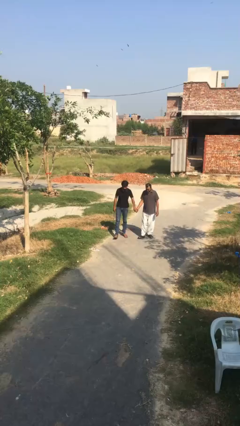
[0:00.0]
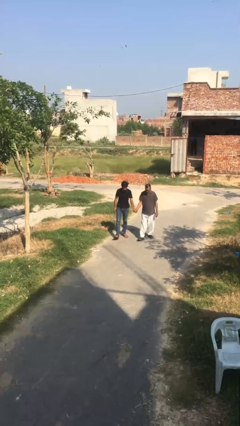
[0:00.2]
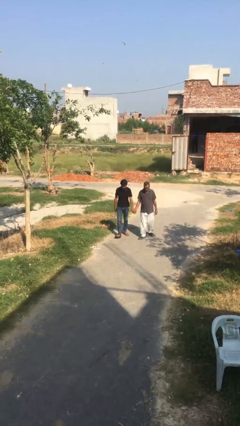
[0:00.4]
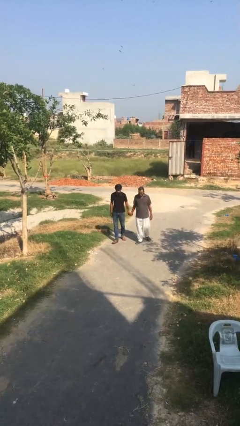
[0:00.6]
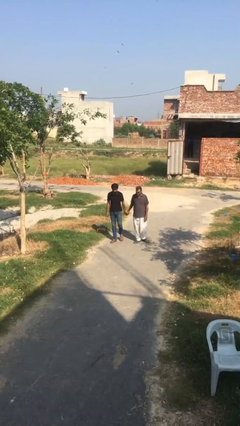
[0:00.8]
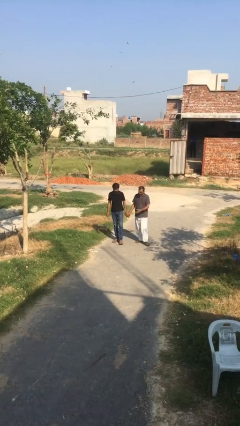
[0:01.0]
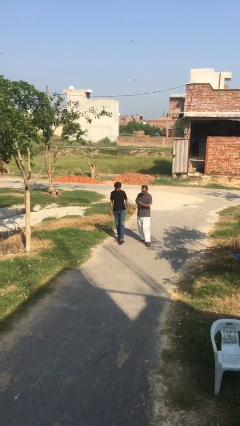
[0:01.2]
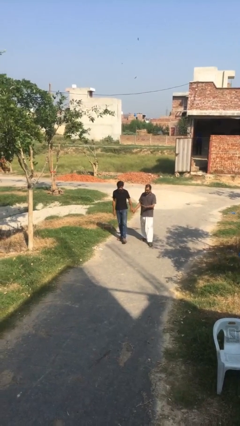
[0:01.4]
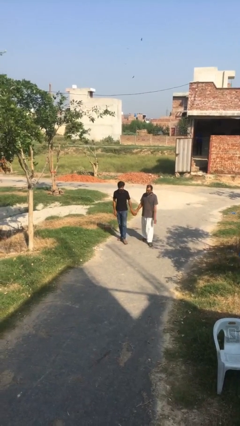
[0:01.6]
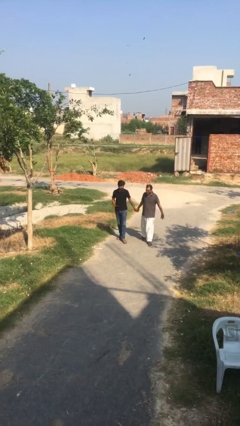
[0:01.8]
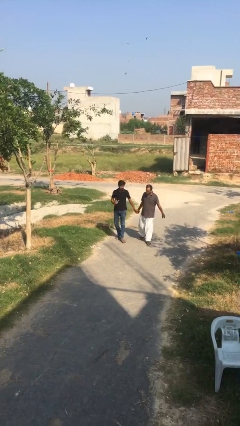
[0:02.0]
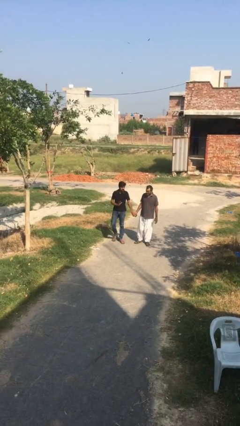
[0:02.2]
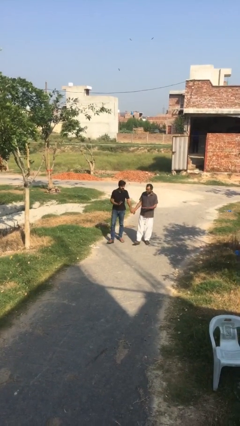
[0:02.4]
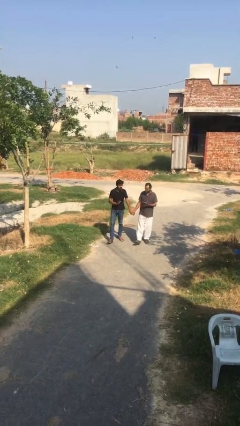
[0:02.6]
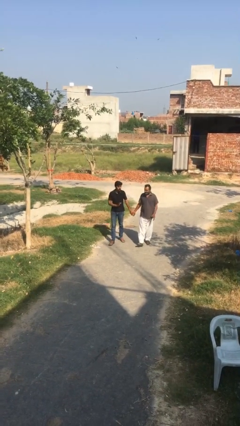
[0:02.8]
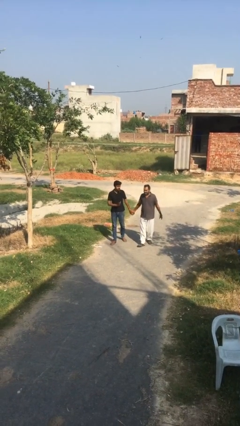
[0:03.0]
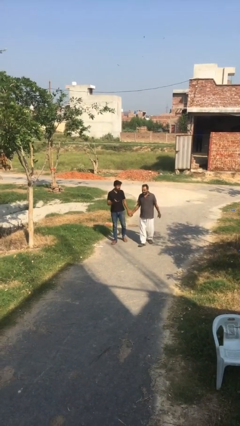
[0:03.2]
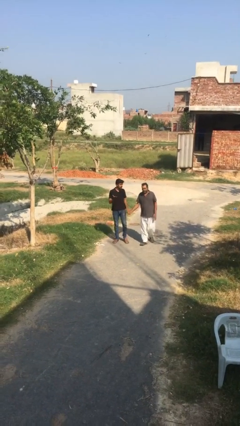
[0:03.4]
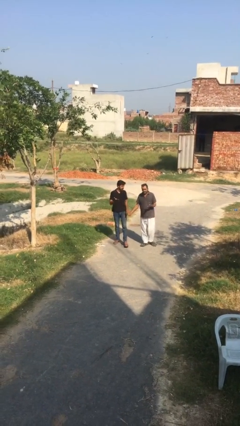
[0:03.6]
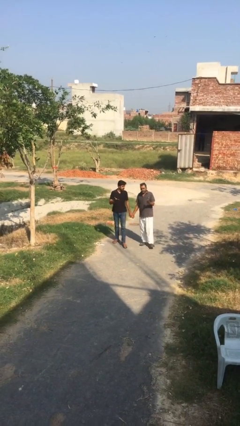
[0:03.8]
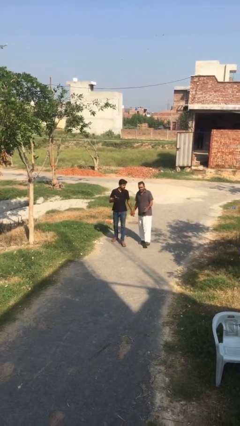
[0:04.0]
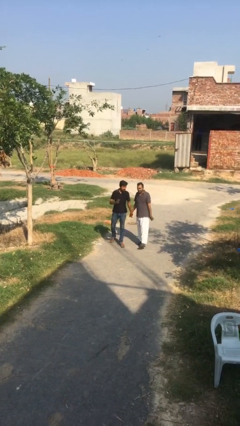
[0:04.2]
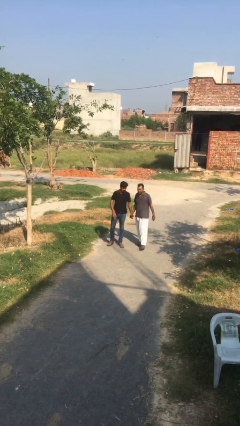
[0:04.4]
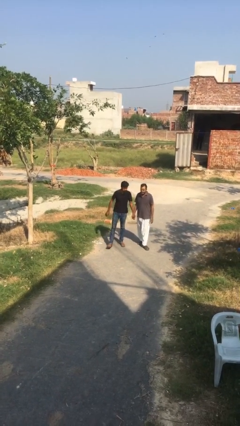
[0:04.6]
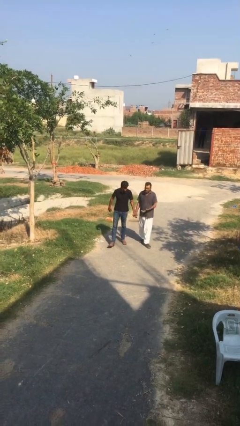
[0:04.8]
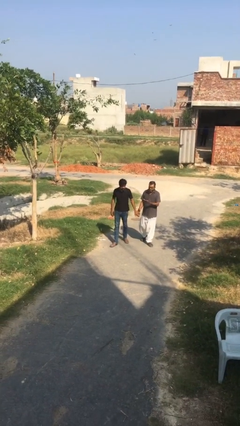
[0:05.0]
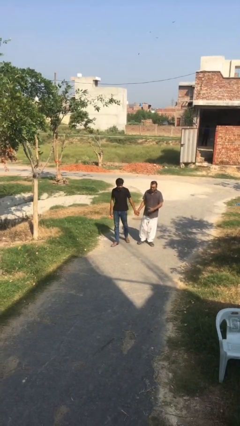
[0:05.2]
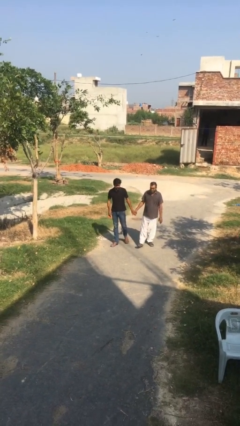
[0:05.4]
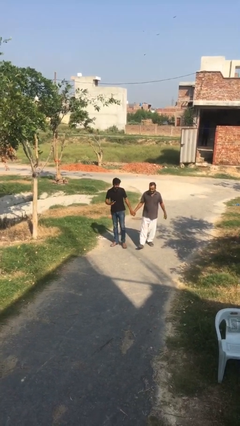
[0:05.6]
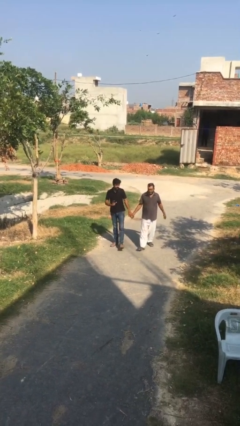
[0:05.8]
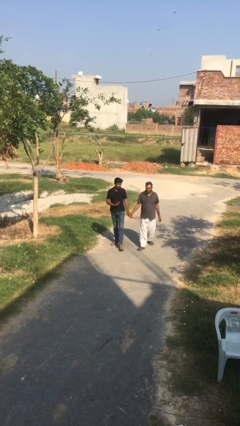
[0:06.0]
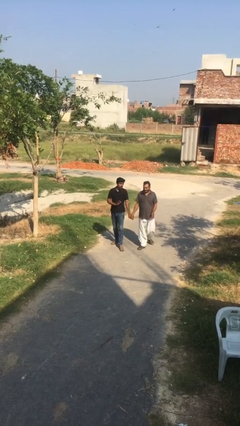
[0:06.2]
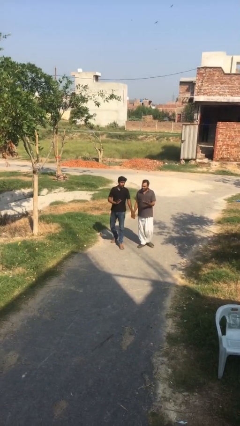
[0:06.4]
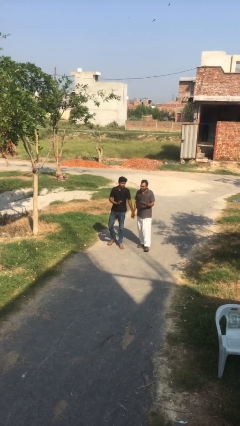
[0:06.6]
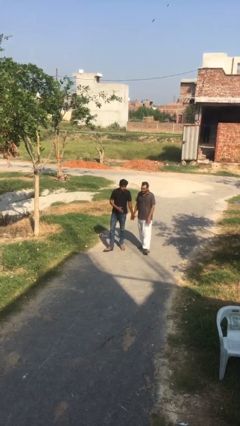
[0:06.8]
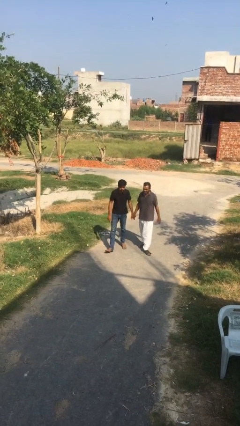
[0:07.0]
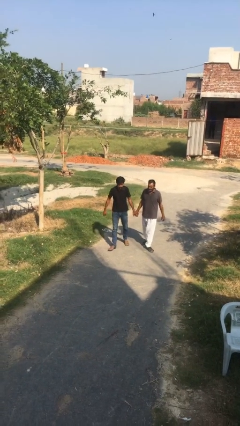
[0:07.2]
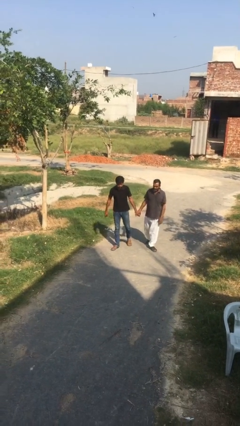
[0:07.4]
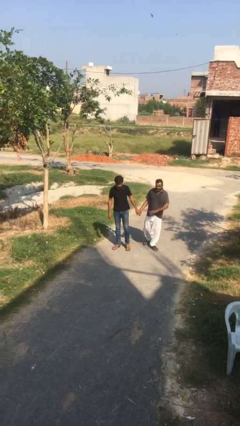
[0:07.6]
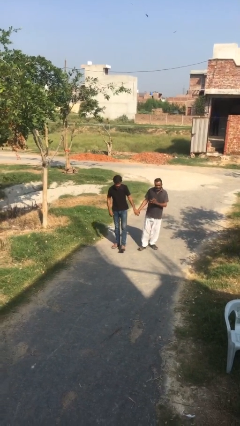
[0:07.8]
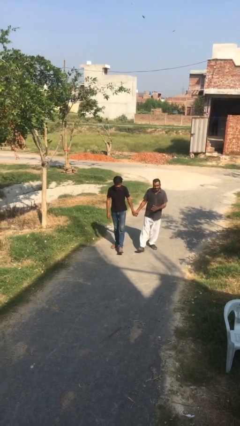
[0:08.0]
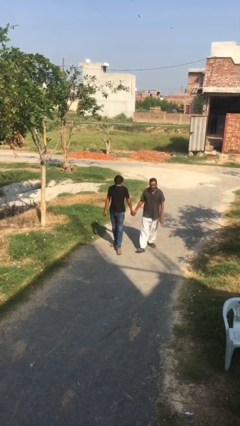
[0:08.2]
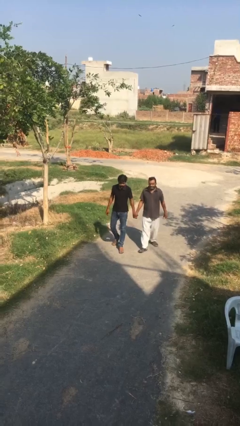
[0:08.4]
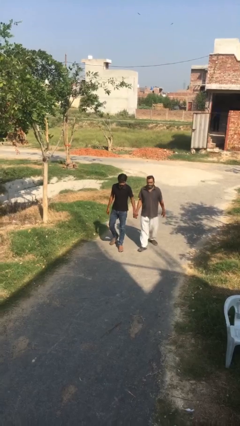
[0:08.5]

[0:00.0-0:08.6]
person holds hand

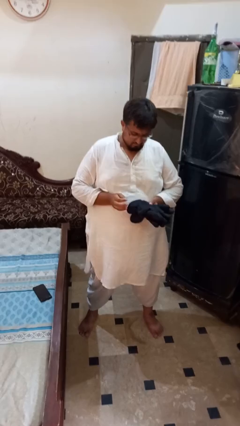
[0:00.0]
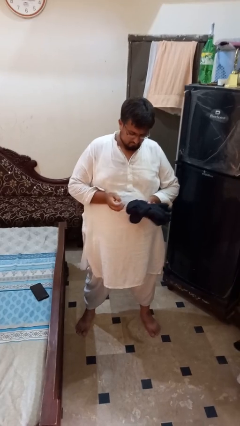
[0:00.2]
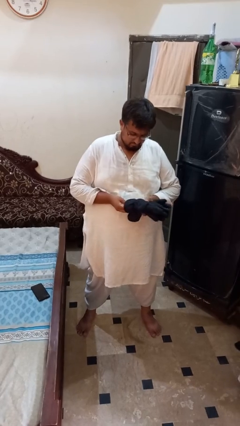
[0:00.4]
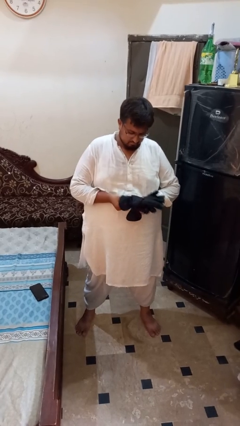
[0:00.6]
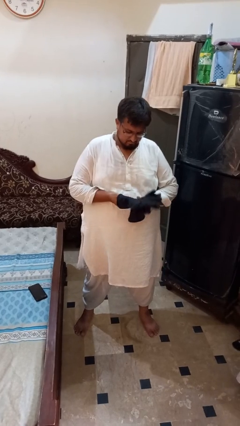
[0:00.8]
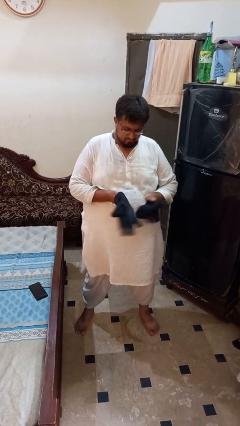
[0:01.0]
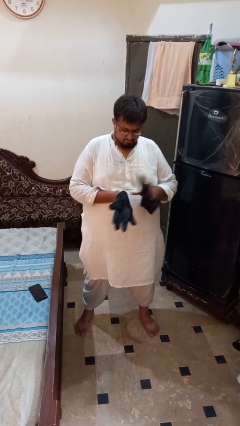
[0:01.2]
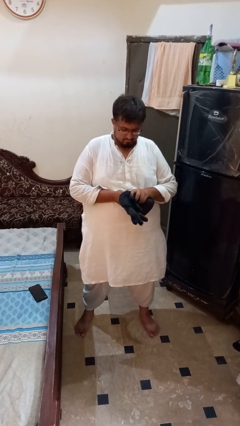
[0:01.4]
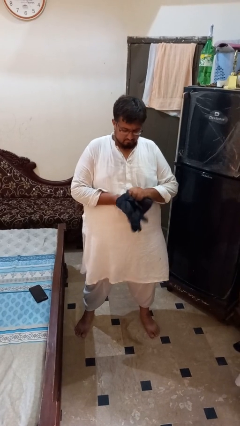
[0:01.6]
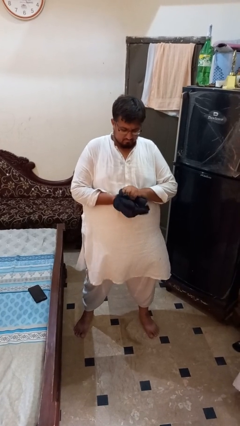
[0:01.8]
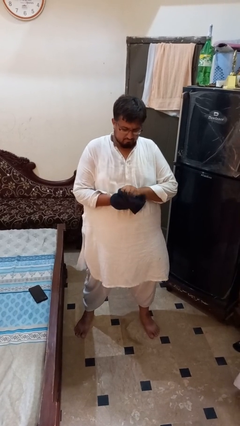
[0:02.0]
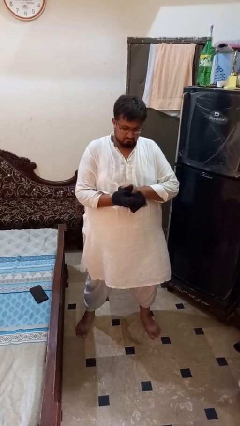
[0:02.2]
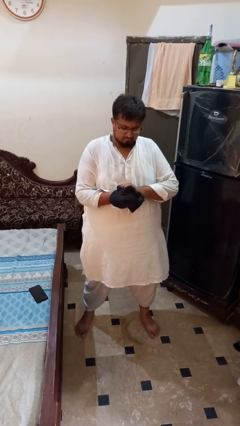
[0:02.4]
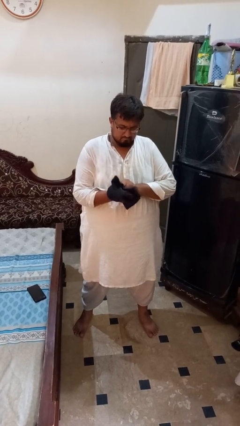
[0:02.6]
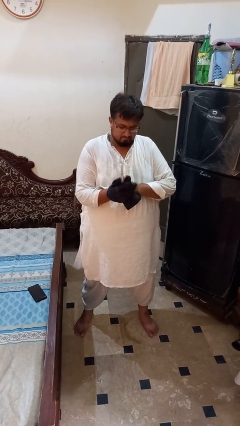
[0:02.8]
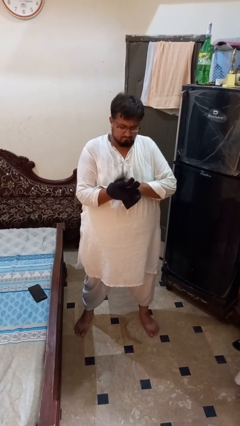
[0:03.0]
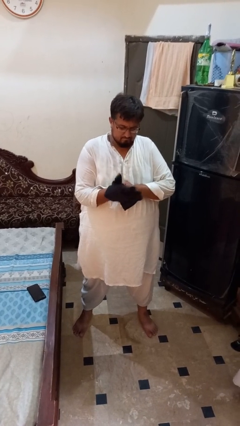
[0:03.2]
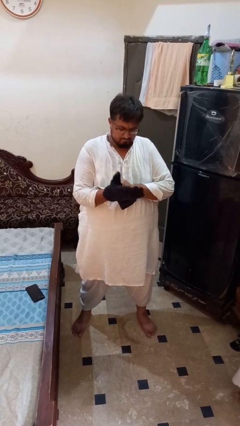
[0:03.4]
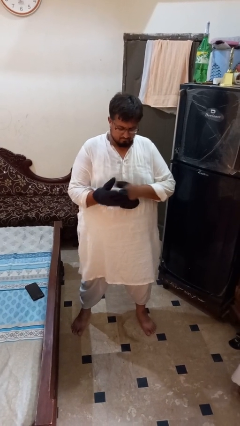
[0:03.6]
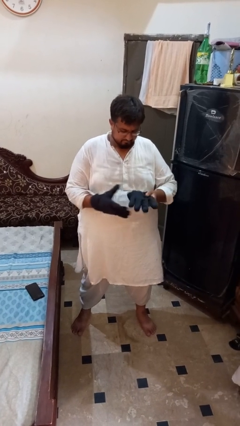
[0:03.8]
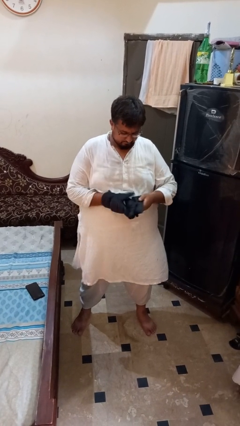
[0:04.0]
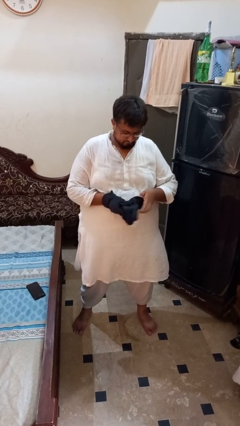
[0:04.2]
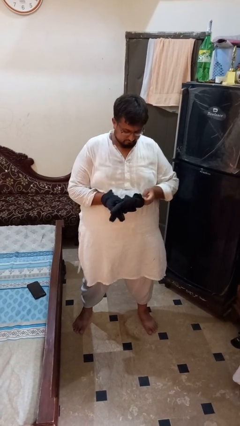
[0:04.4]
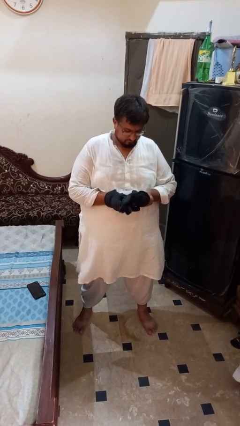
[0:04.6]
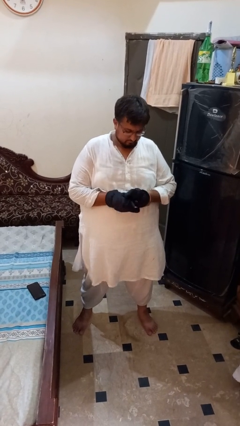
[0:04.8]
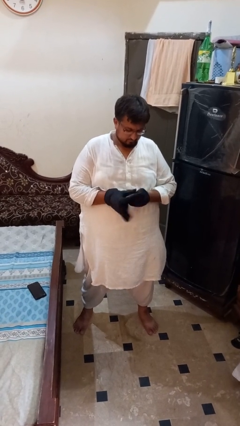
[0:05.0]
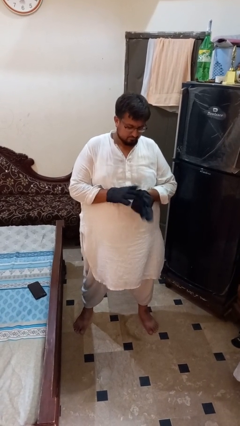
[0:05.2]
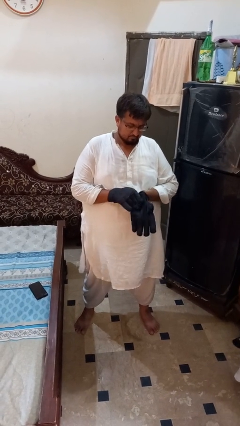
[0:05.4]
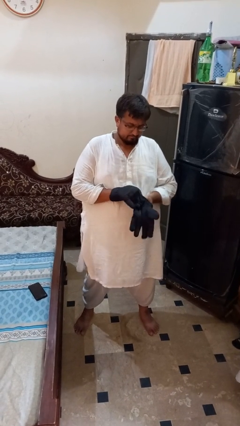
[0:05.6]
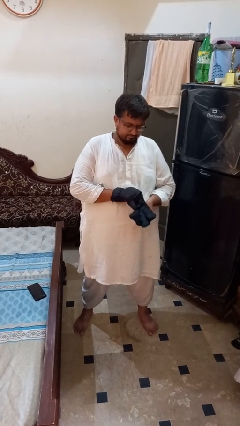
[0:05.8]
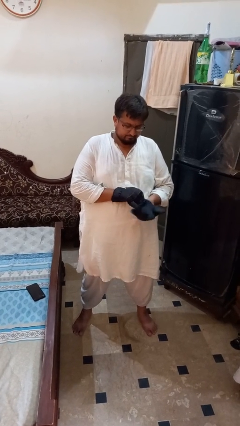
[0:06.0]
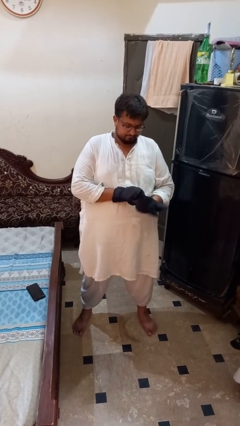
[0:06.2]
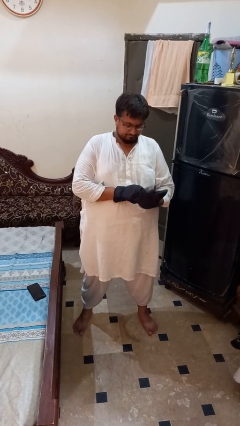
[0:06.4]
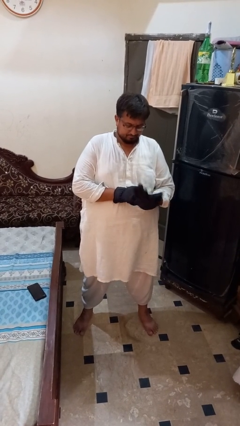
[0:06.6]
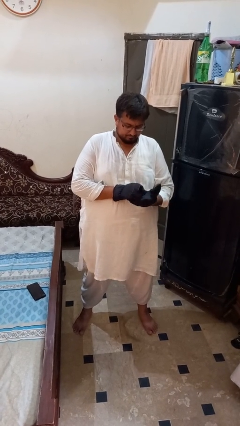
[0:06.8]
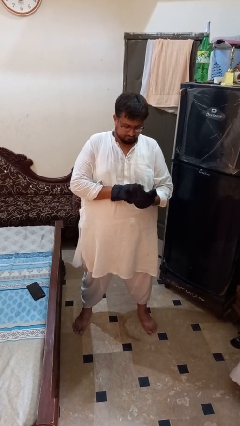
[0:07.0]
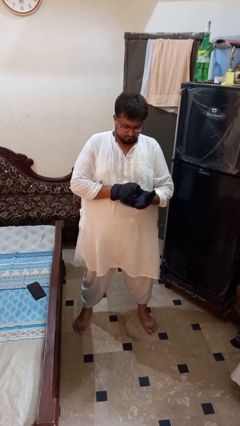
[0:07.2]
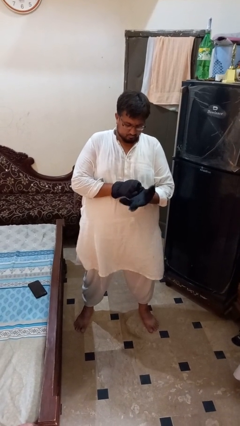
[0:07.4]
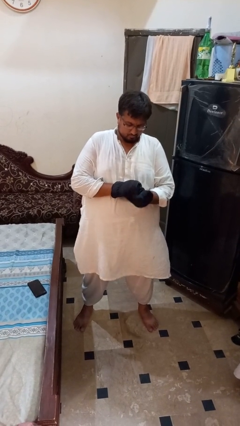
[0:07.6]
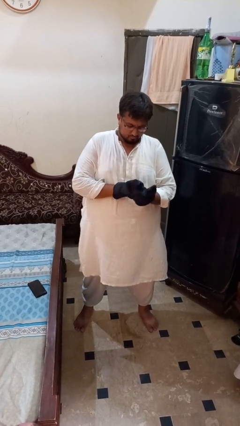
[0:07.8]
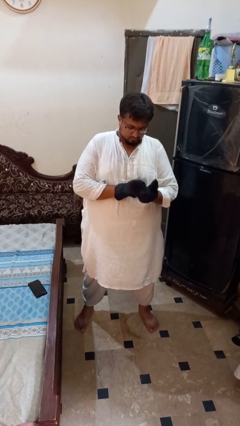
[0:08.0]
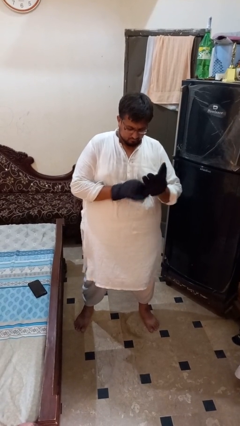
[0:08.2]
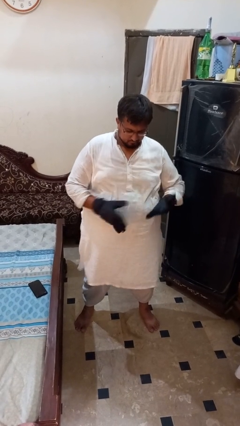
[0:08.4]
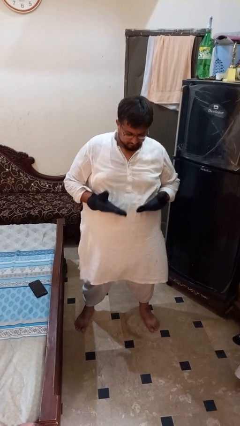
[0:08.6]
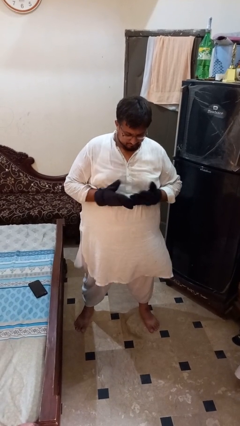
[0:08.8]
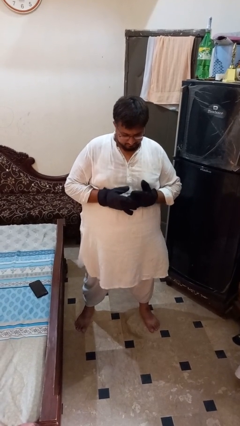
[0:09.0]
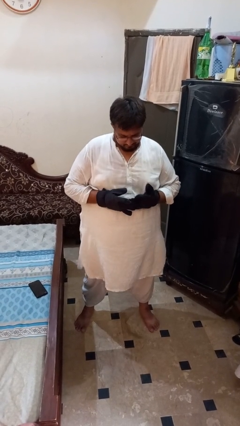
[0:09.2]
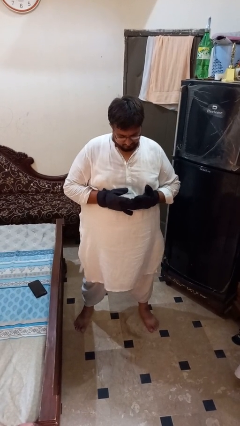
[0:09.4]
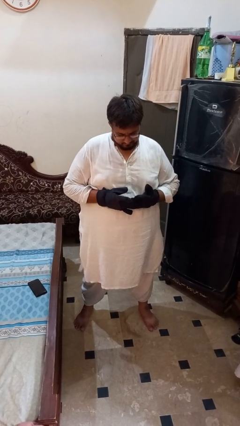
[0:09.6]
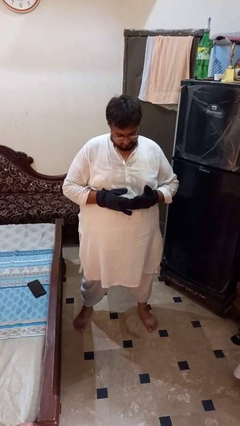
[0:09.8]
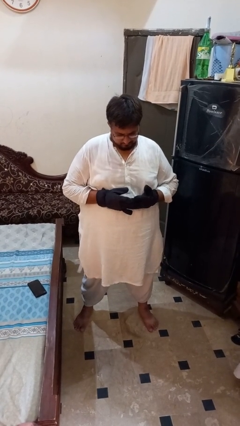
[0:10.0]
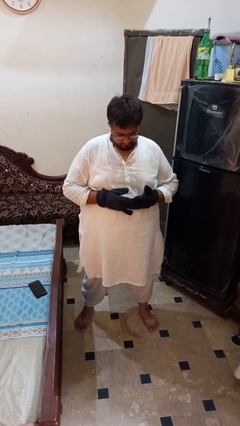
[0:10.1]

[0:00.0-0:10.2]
person puts on gloves
